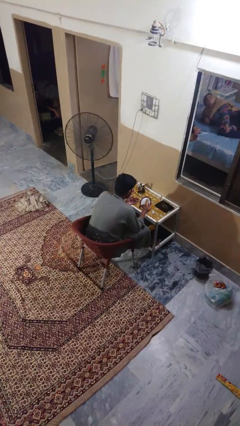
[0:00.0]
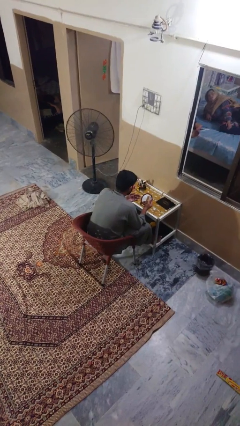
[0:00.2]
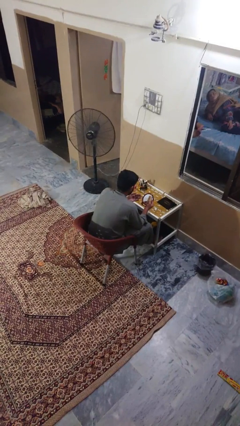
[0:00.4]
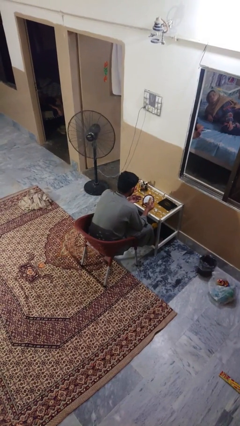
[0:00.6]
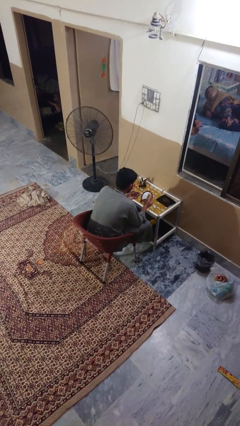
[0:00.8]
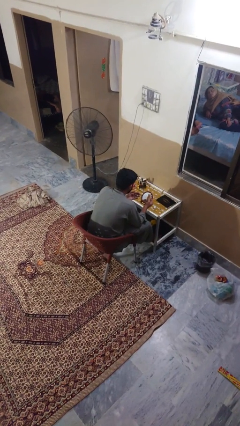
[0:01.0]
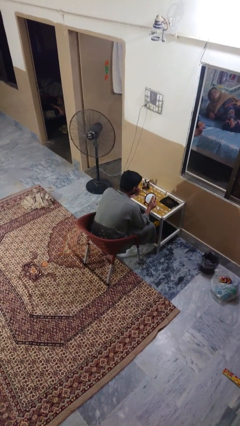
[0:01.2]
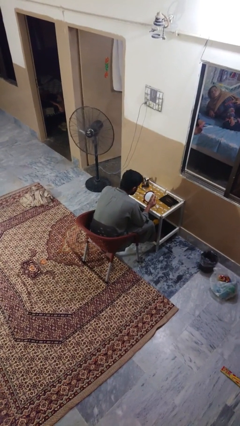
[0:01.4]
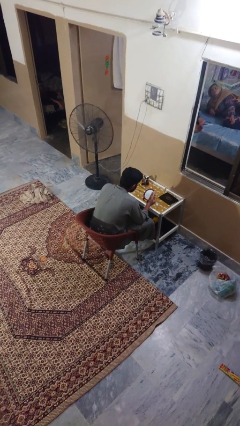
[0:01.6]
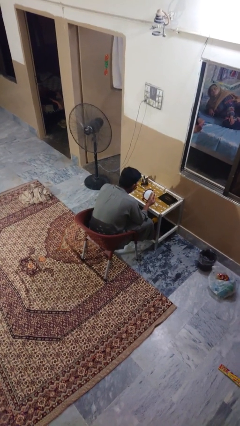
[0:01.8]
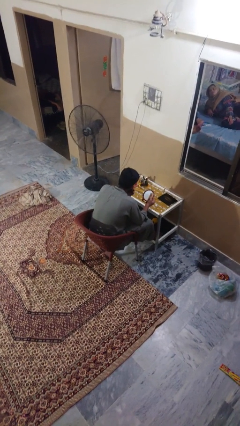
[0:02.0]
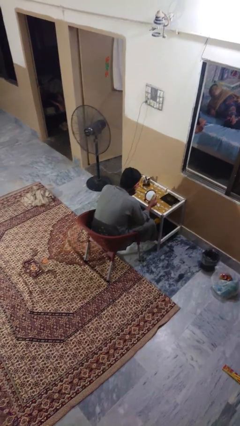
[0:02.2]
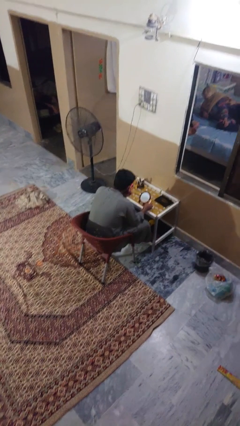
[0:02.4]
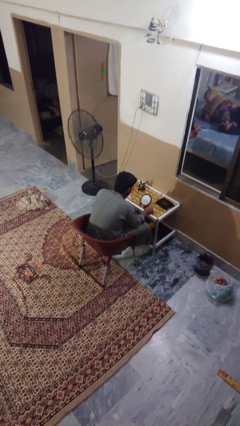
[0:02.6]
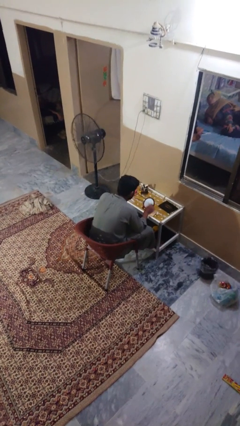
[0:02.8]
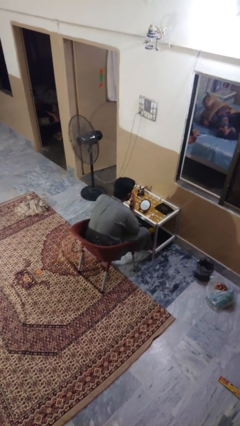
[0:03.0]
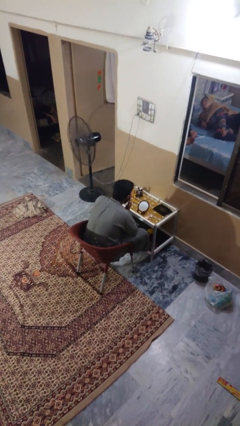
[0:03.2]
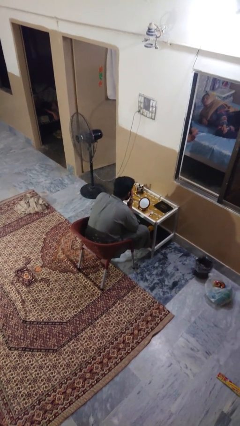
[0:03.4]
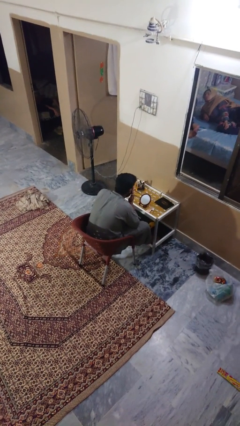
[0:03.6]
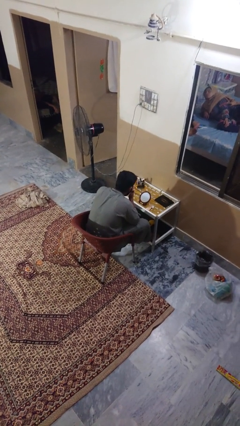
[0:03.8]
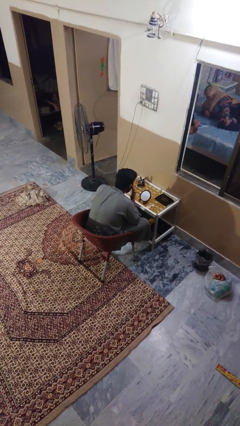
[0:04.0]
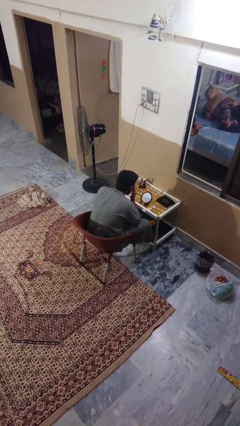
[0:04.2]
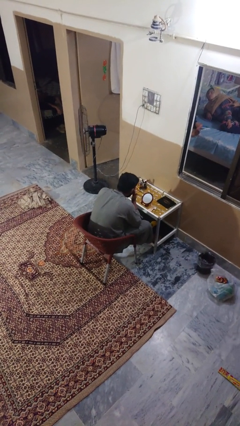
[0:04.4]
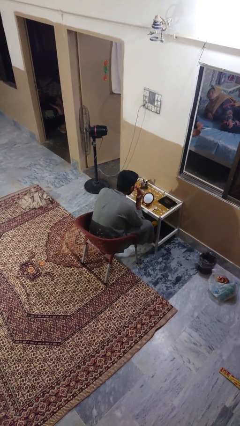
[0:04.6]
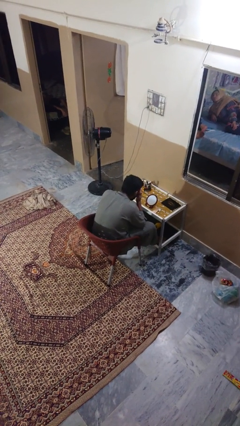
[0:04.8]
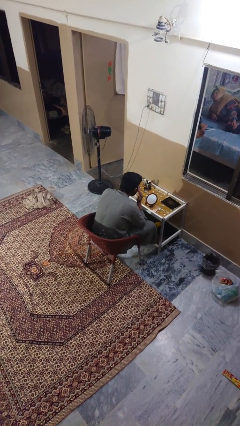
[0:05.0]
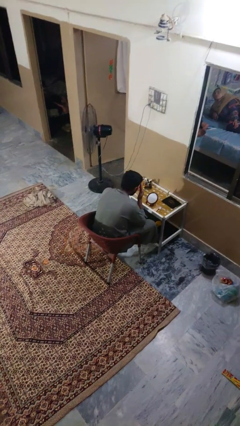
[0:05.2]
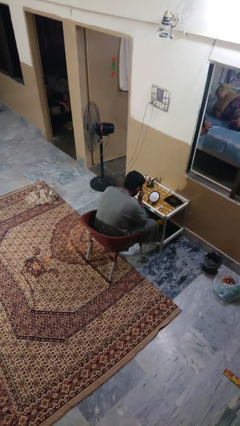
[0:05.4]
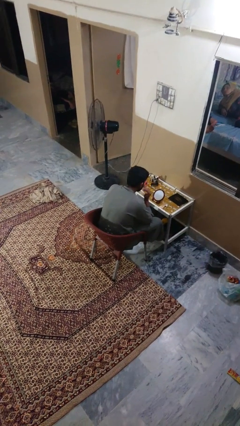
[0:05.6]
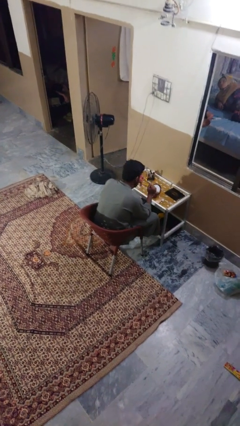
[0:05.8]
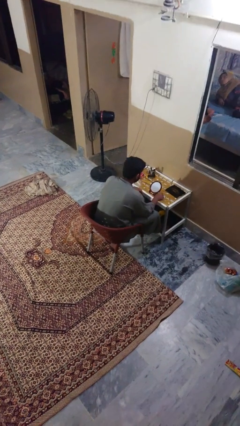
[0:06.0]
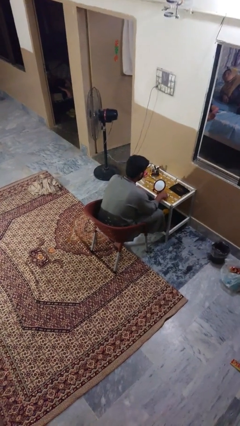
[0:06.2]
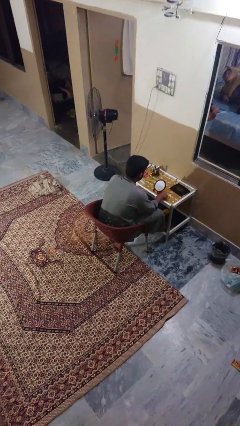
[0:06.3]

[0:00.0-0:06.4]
person applies foundation makeup

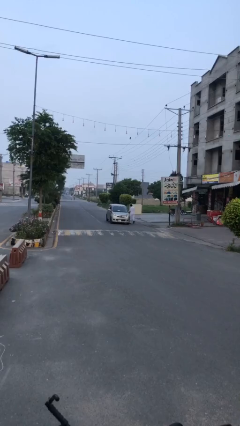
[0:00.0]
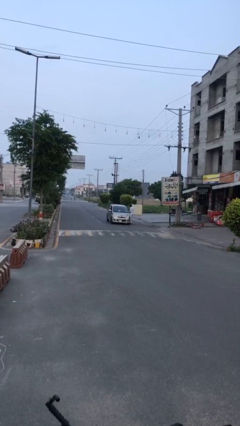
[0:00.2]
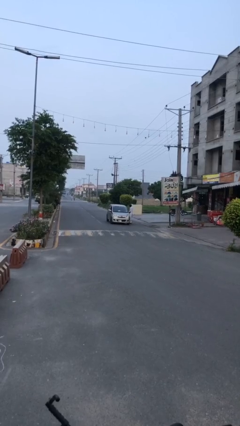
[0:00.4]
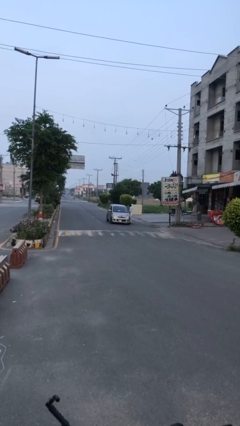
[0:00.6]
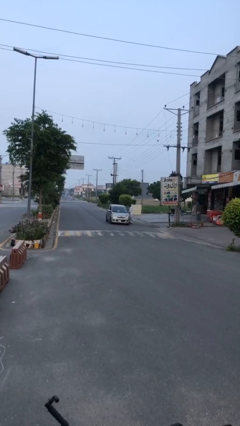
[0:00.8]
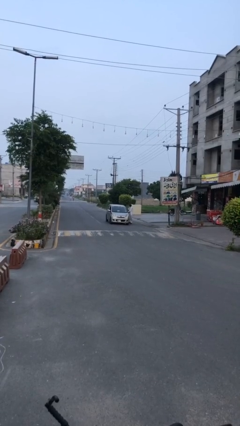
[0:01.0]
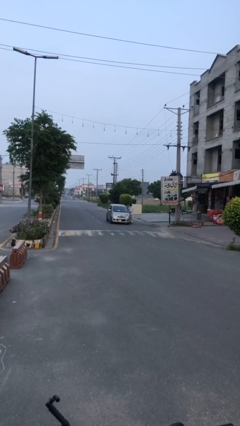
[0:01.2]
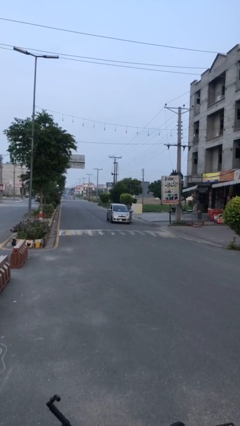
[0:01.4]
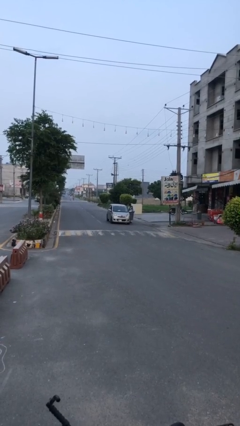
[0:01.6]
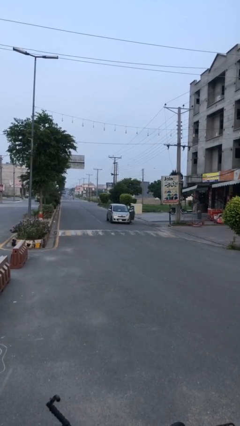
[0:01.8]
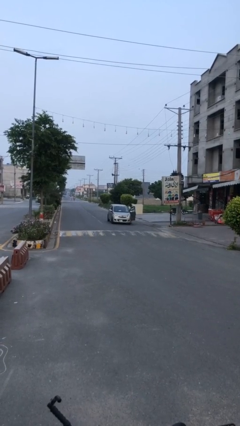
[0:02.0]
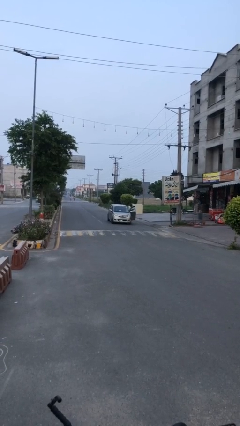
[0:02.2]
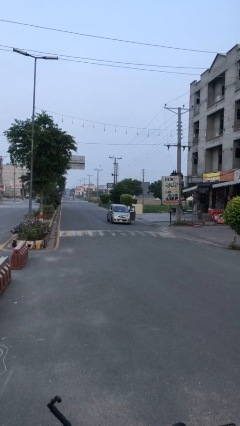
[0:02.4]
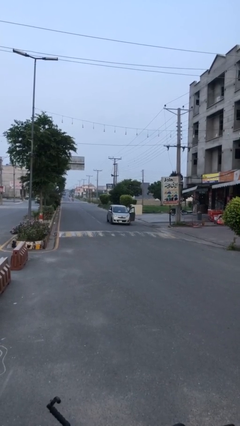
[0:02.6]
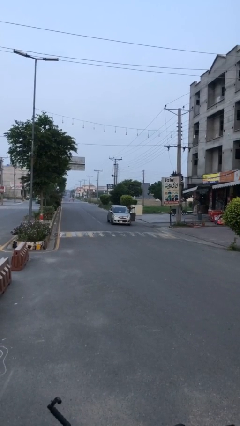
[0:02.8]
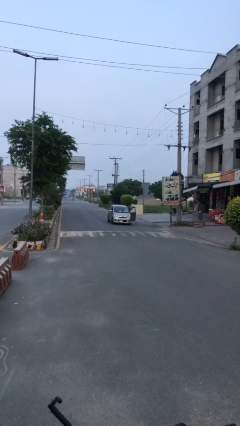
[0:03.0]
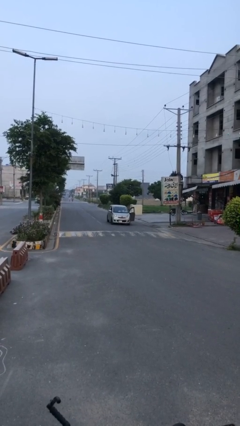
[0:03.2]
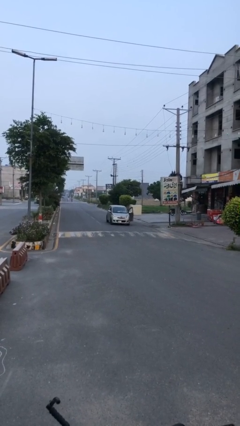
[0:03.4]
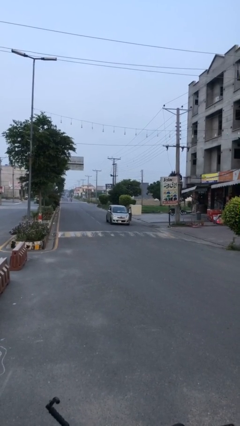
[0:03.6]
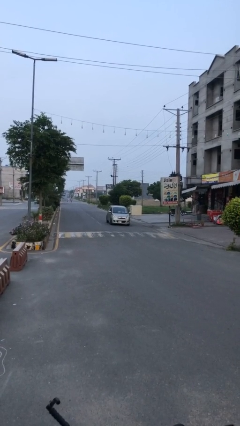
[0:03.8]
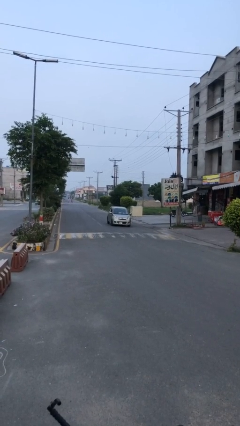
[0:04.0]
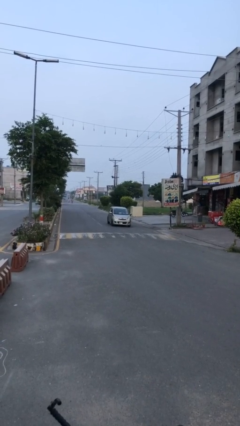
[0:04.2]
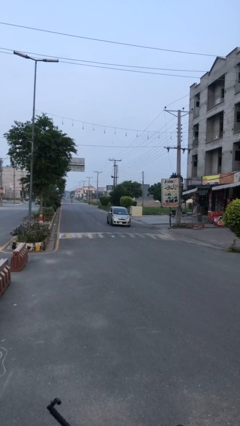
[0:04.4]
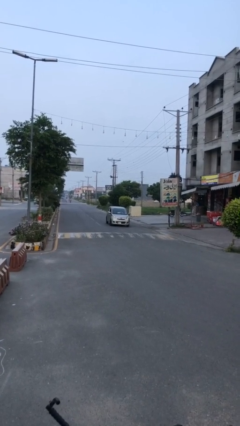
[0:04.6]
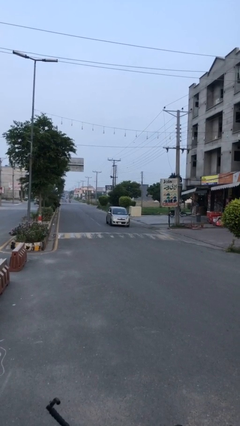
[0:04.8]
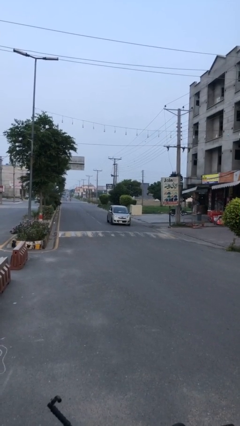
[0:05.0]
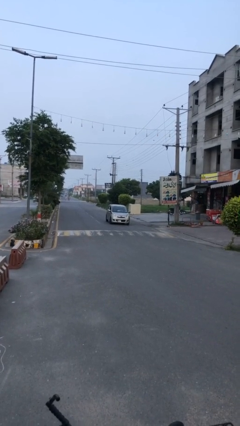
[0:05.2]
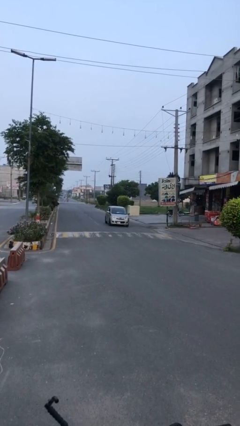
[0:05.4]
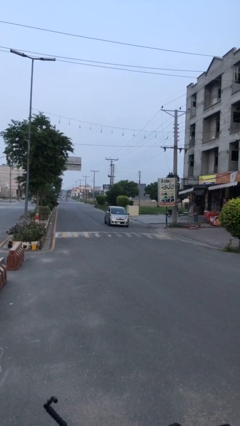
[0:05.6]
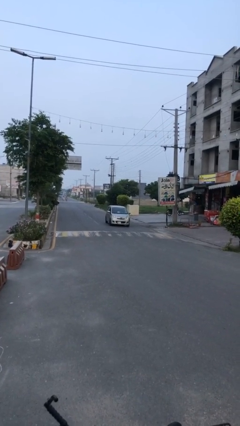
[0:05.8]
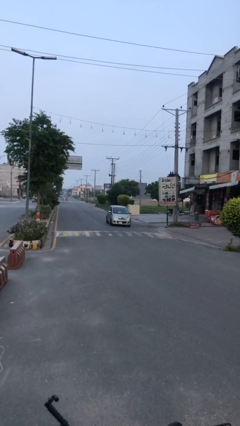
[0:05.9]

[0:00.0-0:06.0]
car picks up person

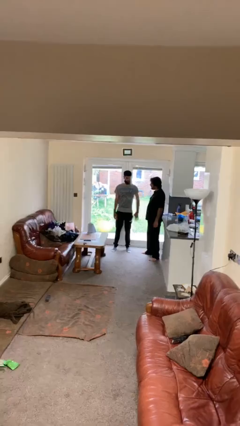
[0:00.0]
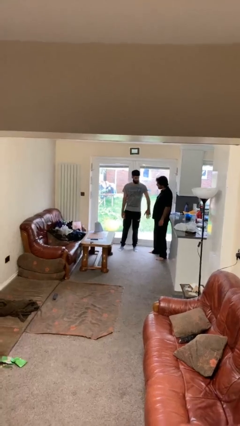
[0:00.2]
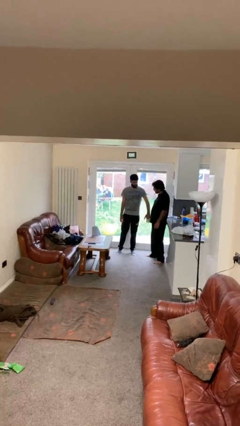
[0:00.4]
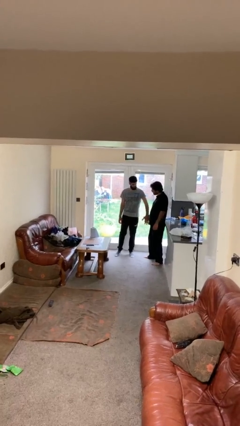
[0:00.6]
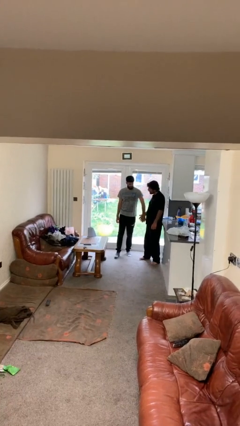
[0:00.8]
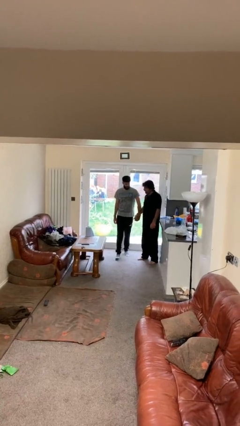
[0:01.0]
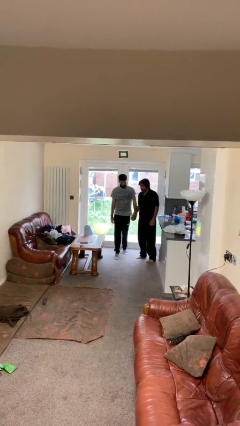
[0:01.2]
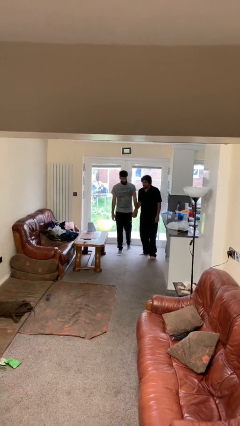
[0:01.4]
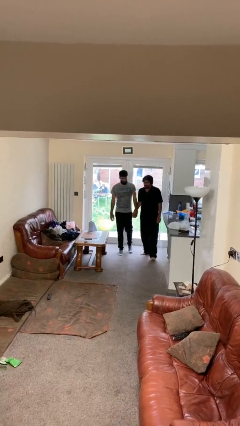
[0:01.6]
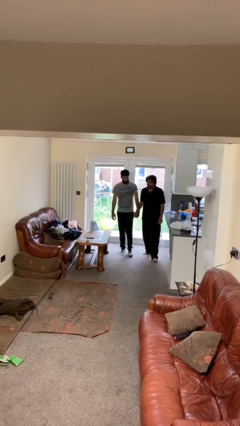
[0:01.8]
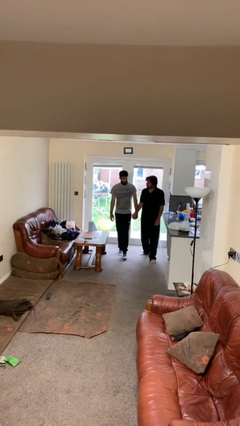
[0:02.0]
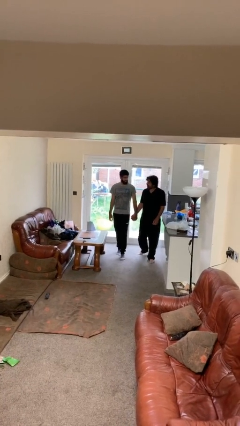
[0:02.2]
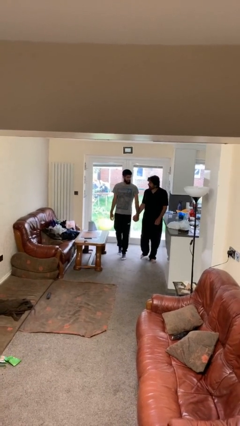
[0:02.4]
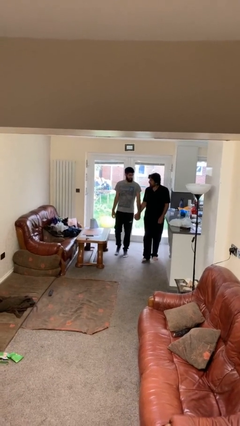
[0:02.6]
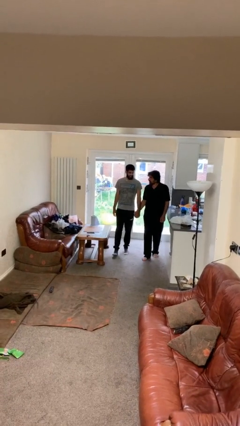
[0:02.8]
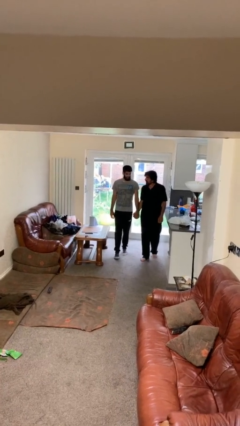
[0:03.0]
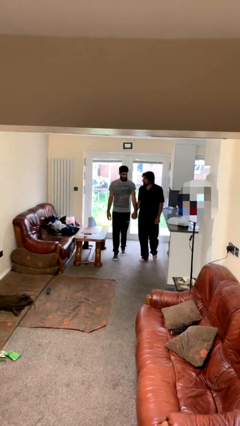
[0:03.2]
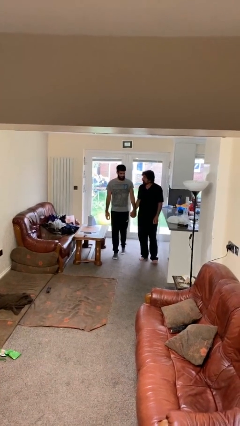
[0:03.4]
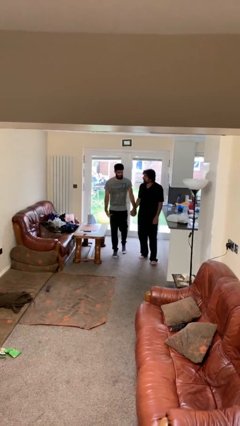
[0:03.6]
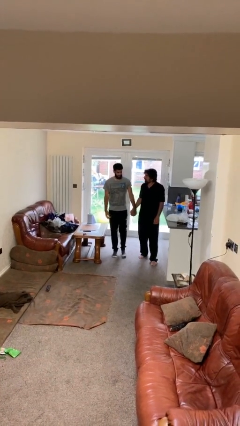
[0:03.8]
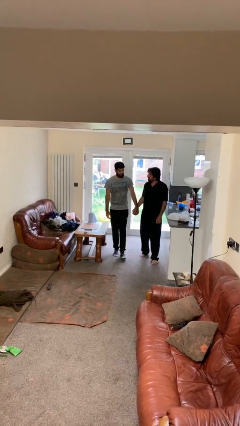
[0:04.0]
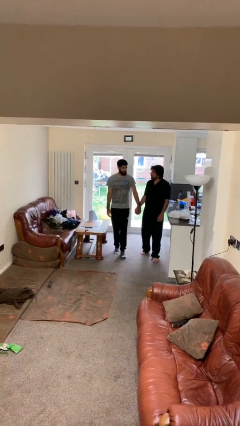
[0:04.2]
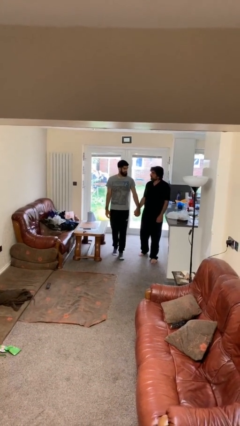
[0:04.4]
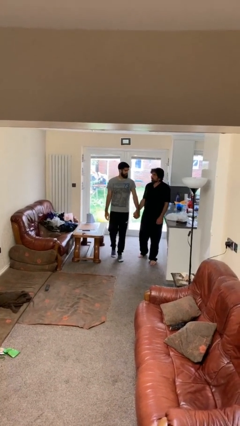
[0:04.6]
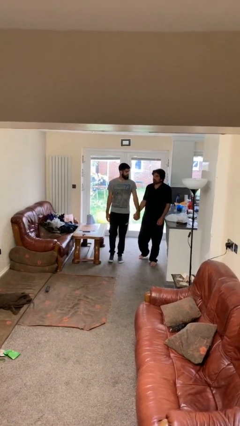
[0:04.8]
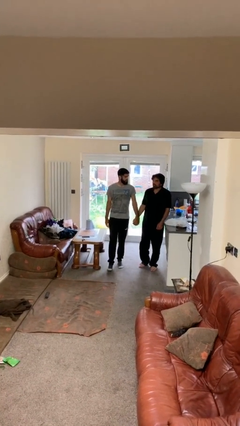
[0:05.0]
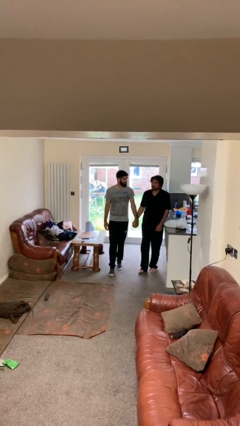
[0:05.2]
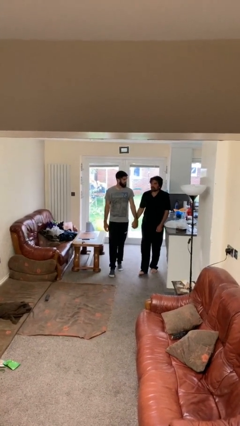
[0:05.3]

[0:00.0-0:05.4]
person holds hand
